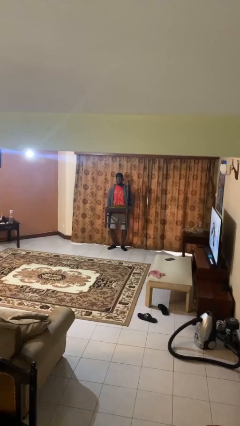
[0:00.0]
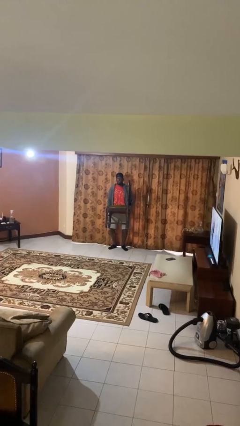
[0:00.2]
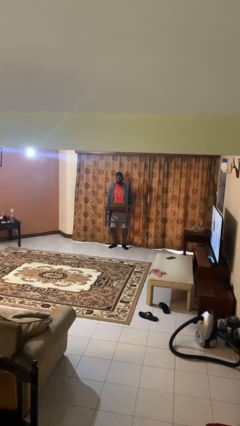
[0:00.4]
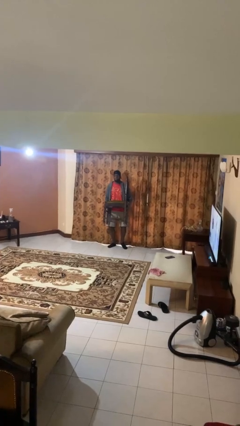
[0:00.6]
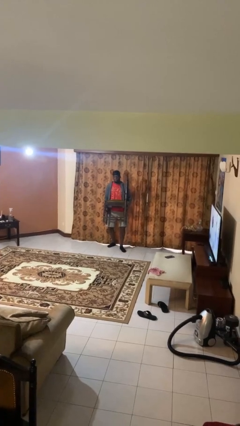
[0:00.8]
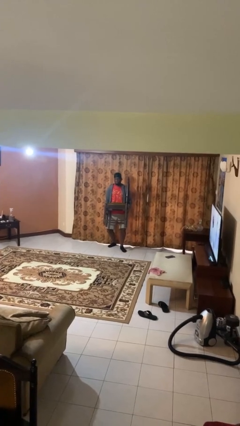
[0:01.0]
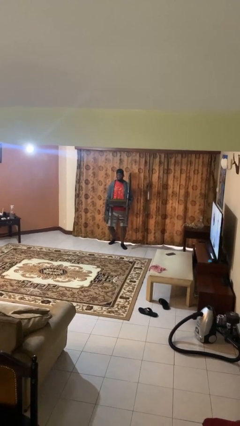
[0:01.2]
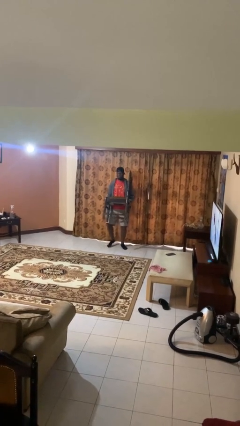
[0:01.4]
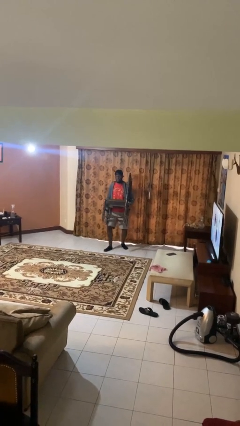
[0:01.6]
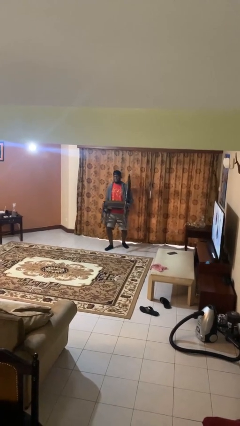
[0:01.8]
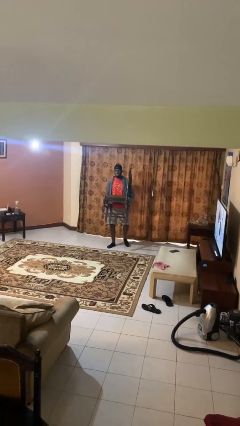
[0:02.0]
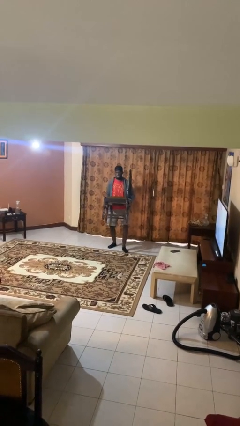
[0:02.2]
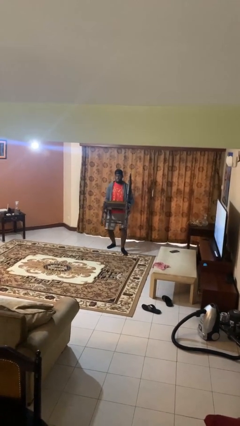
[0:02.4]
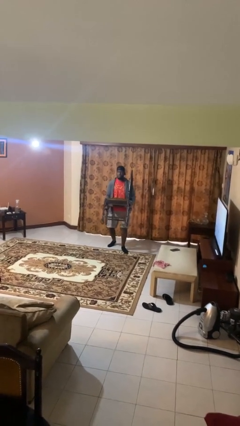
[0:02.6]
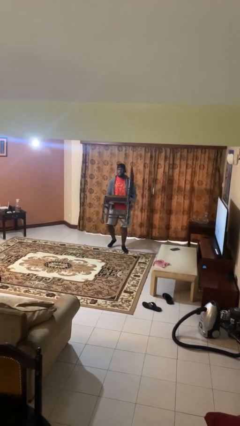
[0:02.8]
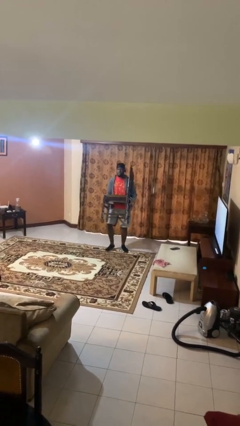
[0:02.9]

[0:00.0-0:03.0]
person carries heavy object

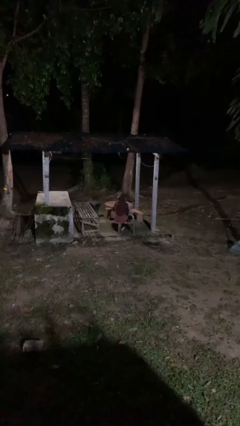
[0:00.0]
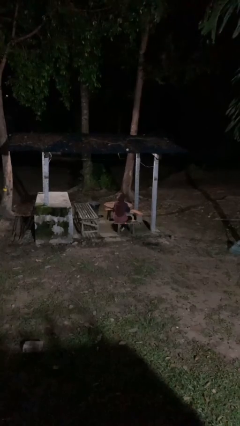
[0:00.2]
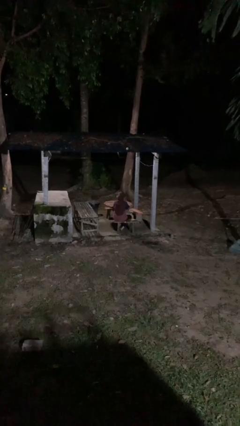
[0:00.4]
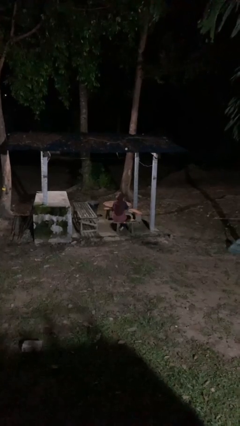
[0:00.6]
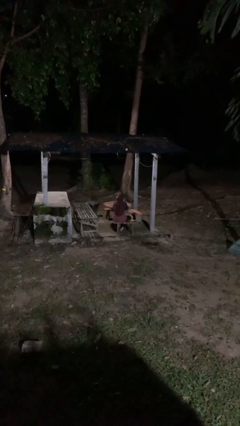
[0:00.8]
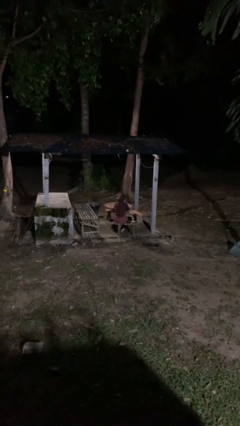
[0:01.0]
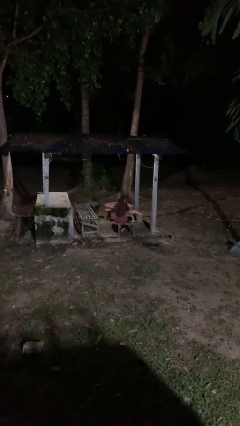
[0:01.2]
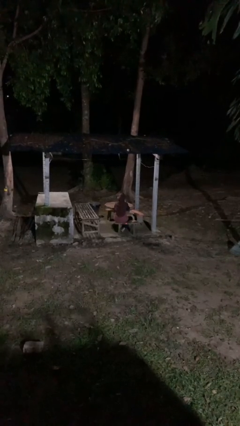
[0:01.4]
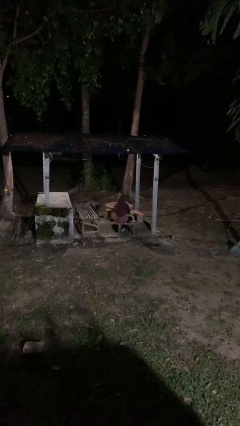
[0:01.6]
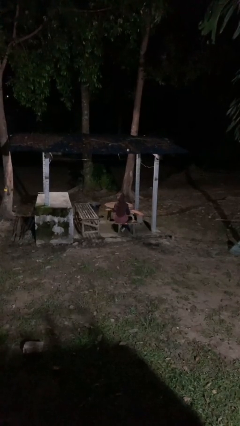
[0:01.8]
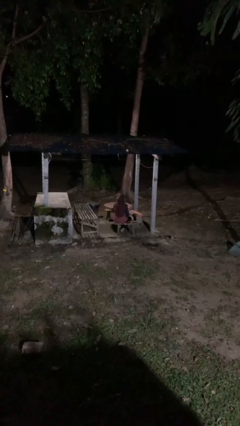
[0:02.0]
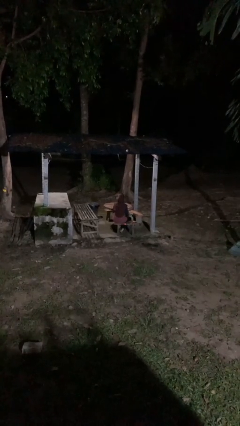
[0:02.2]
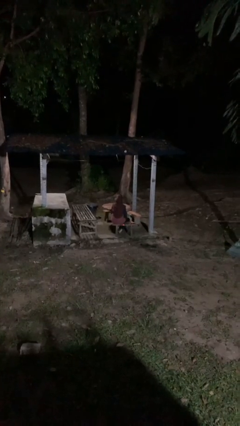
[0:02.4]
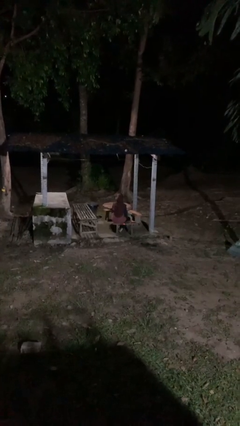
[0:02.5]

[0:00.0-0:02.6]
person strokes chin

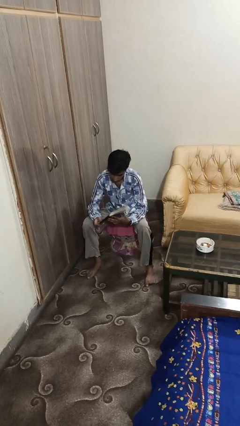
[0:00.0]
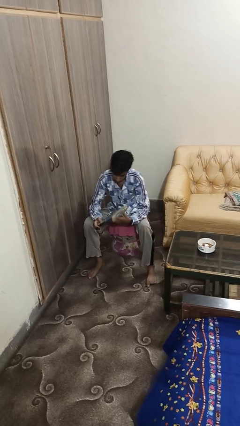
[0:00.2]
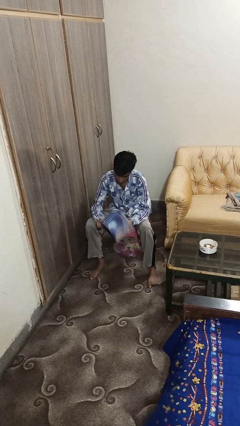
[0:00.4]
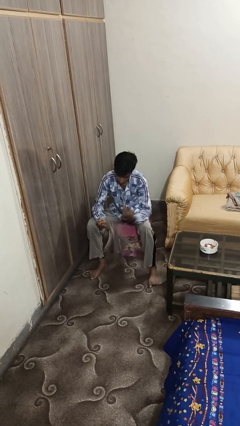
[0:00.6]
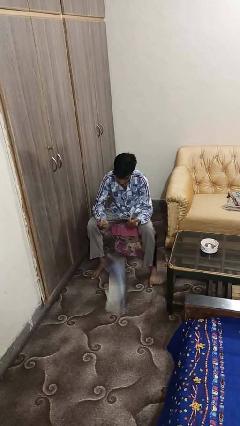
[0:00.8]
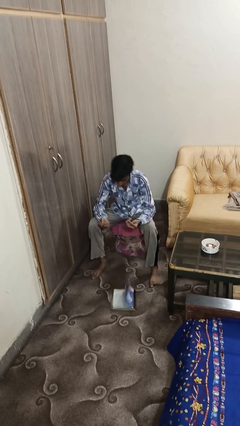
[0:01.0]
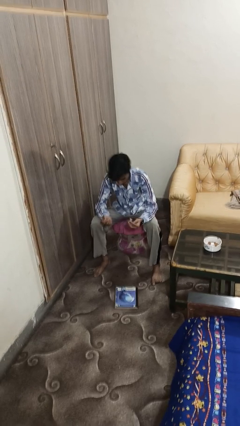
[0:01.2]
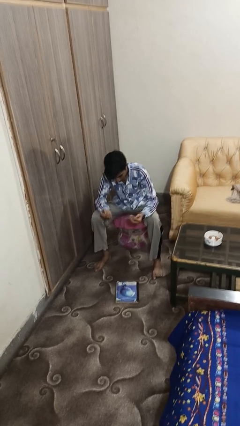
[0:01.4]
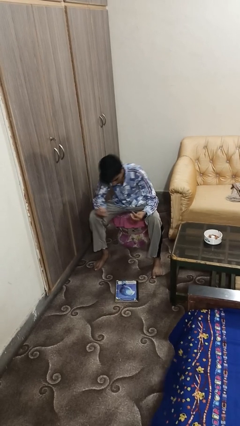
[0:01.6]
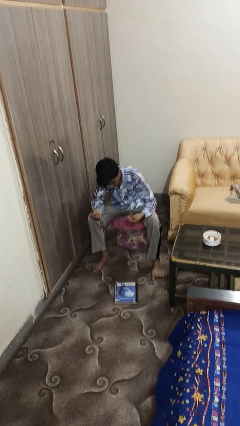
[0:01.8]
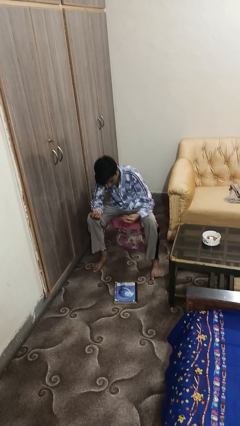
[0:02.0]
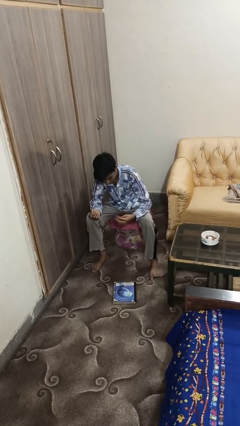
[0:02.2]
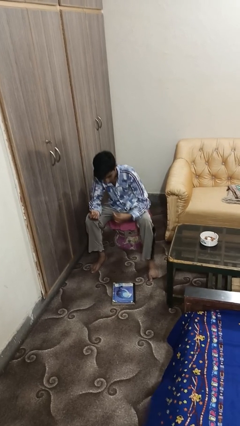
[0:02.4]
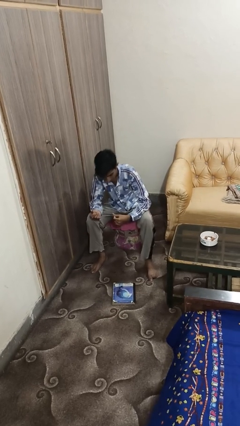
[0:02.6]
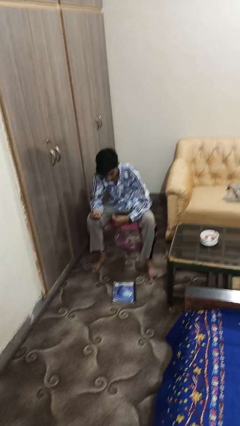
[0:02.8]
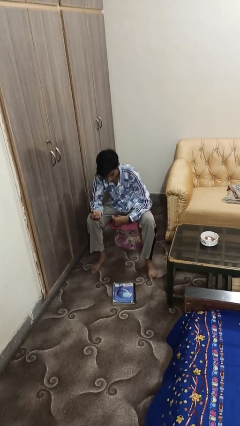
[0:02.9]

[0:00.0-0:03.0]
person drops object

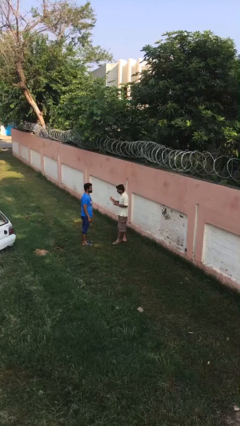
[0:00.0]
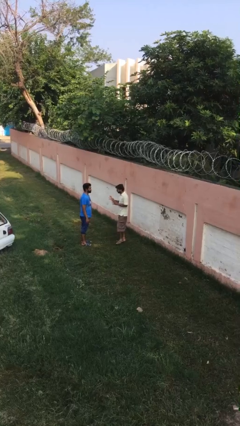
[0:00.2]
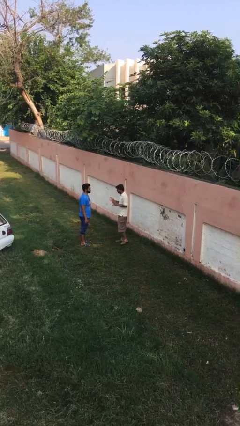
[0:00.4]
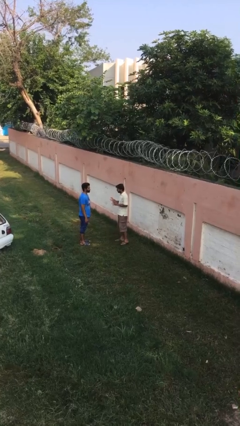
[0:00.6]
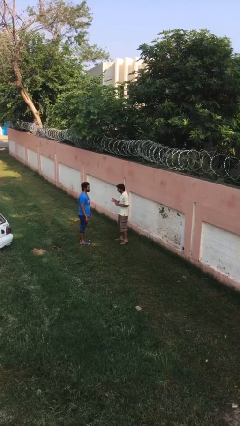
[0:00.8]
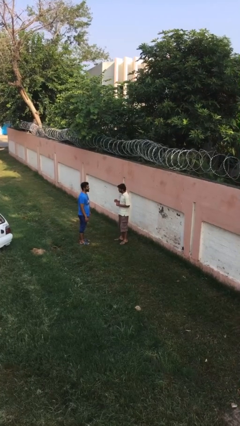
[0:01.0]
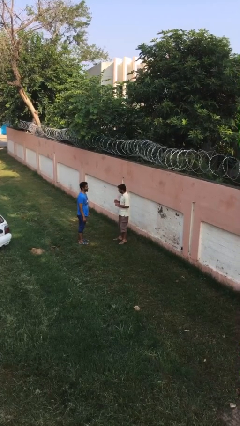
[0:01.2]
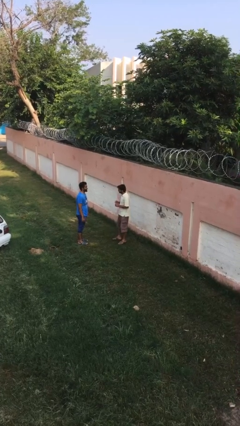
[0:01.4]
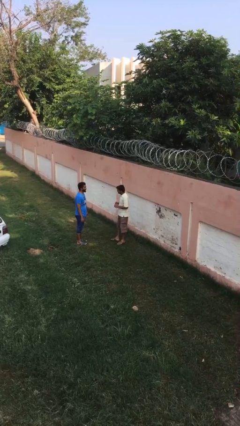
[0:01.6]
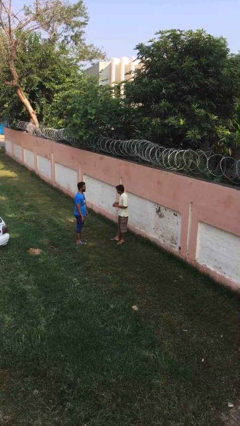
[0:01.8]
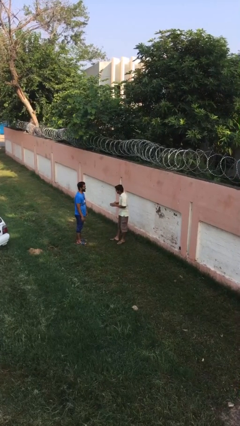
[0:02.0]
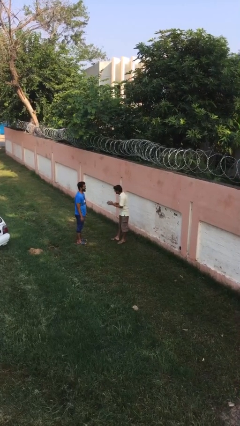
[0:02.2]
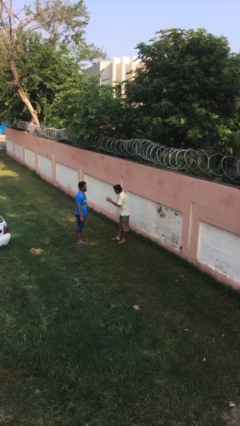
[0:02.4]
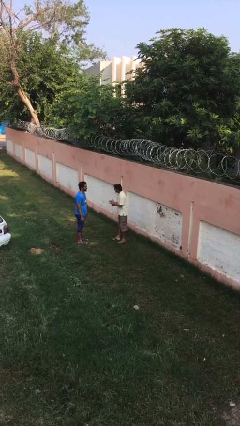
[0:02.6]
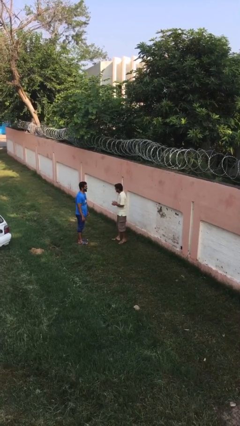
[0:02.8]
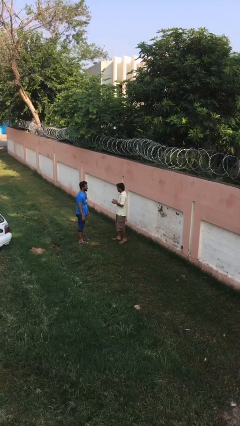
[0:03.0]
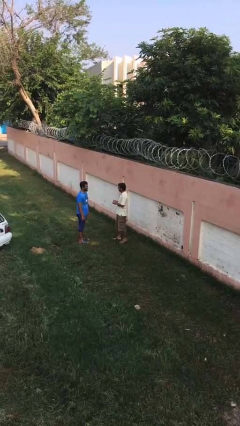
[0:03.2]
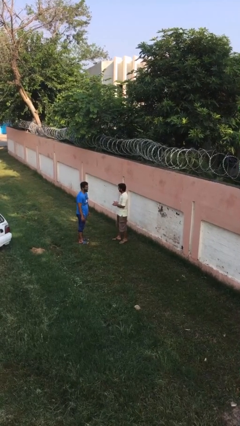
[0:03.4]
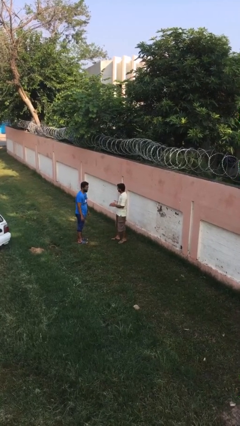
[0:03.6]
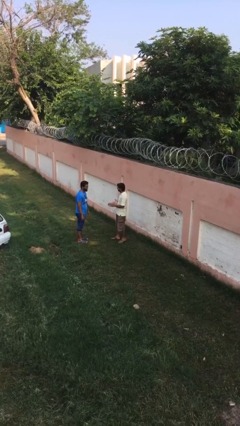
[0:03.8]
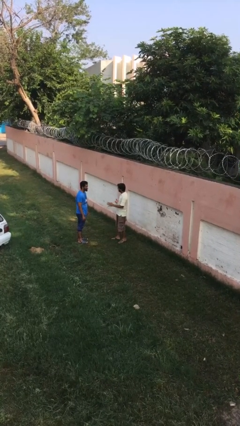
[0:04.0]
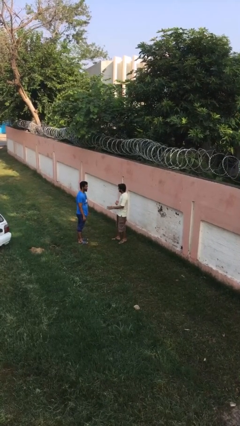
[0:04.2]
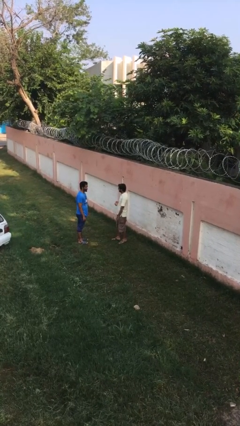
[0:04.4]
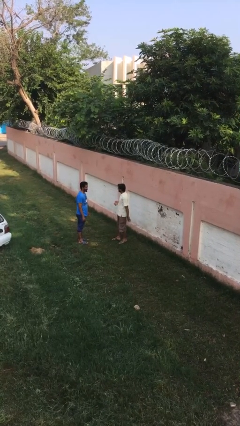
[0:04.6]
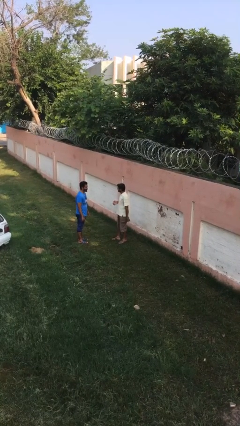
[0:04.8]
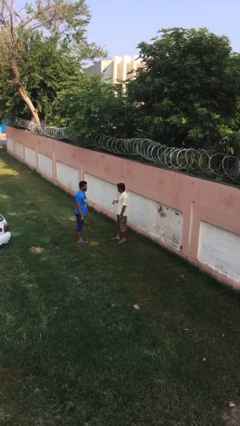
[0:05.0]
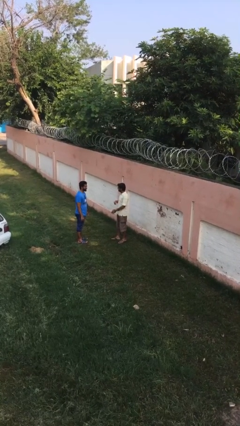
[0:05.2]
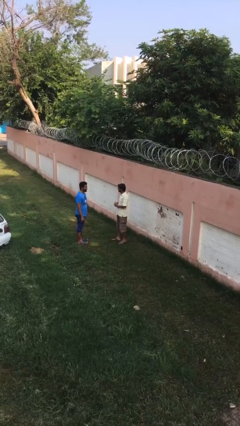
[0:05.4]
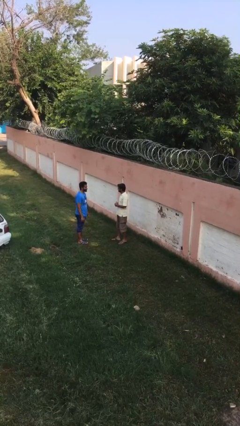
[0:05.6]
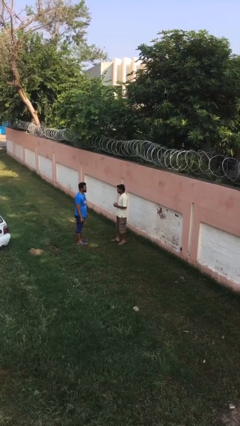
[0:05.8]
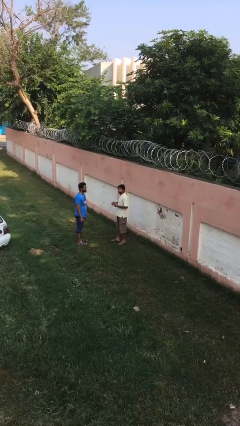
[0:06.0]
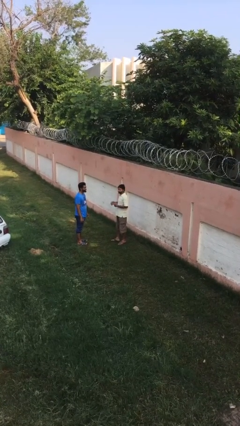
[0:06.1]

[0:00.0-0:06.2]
person talks to person

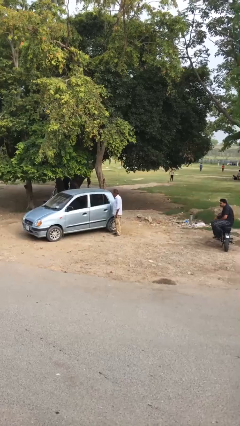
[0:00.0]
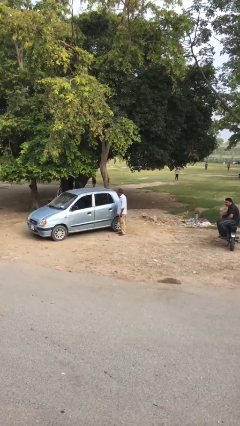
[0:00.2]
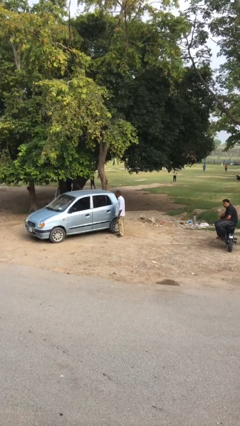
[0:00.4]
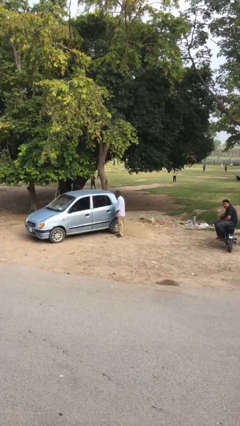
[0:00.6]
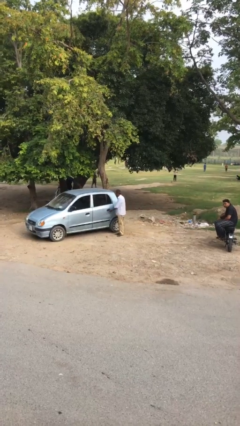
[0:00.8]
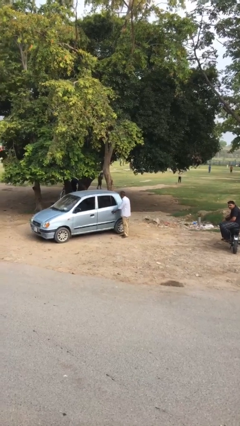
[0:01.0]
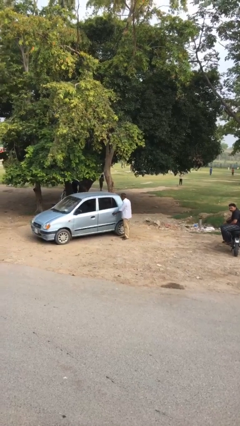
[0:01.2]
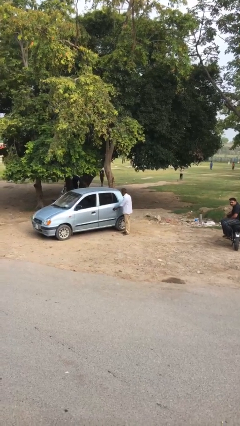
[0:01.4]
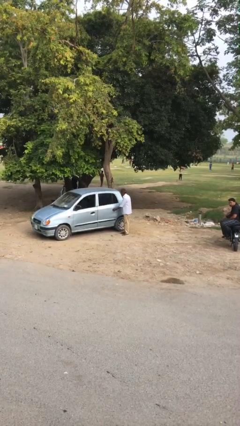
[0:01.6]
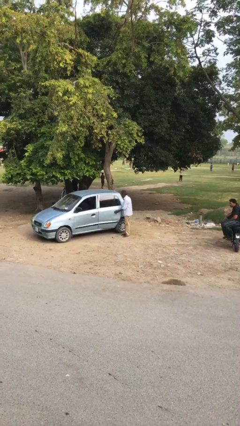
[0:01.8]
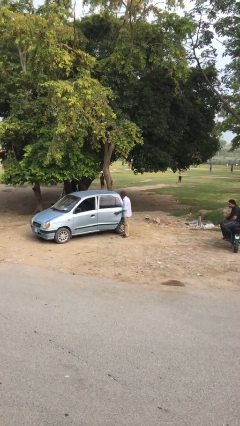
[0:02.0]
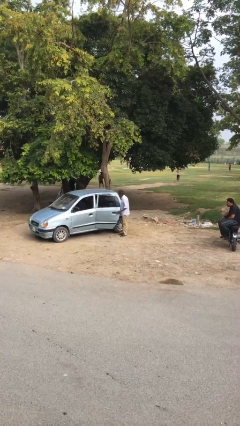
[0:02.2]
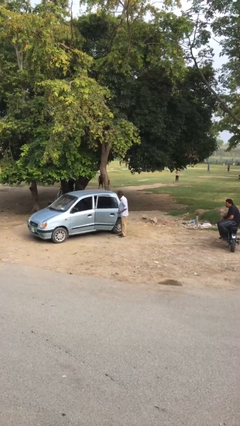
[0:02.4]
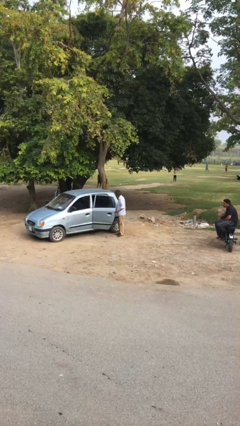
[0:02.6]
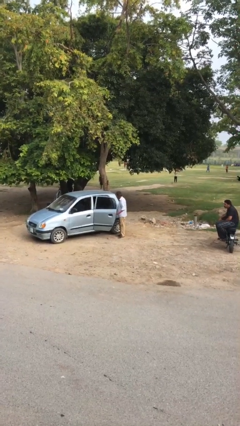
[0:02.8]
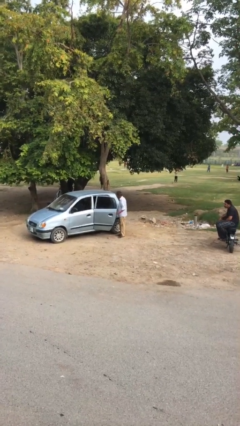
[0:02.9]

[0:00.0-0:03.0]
person opens car door
